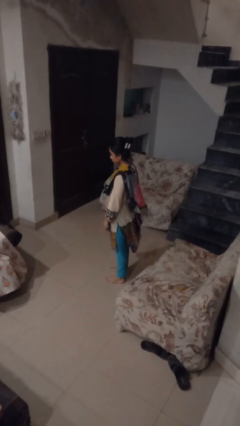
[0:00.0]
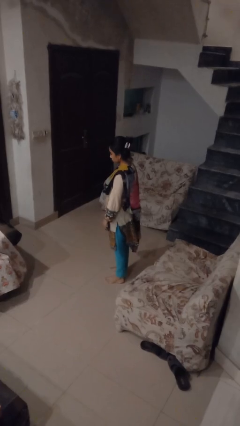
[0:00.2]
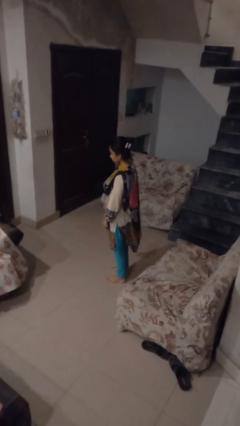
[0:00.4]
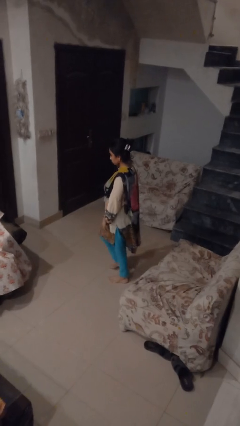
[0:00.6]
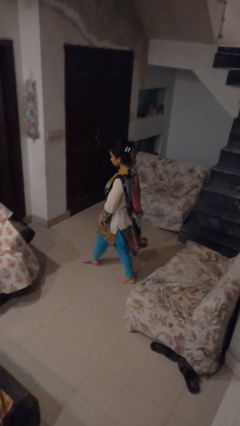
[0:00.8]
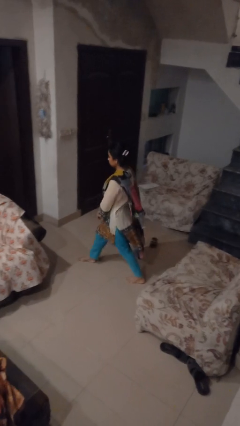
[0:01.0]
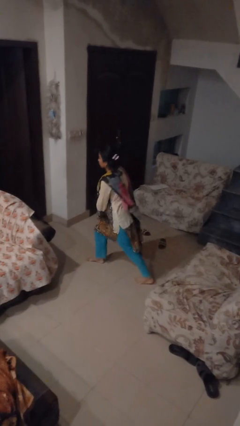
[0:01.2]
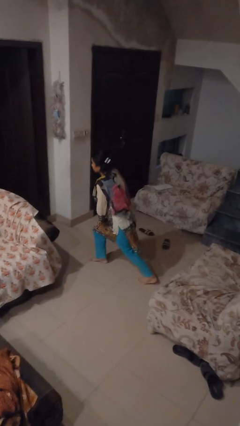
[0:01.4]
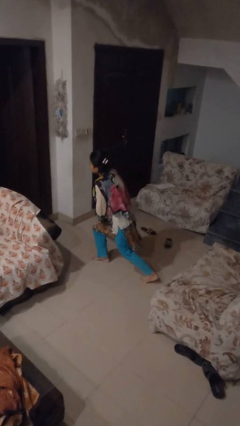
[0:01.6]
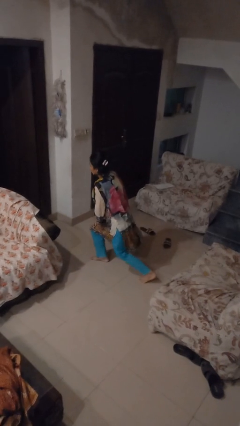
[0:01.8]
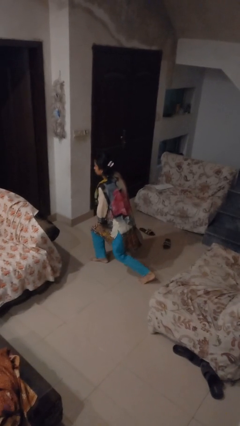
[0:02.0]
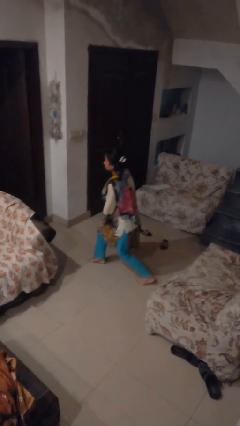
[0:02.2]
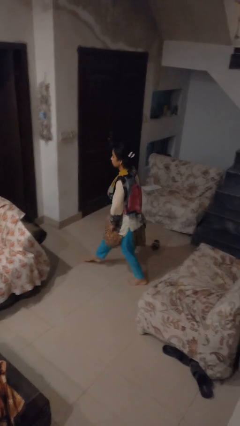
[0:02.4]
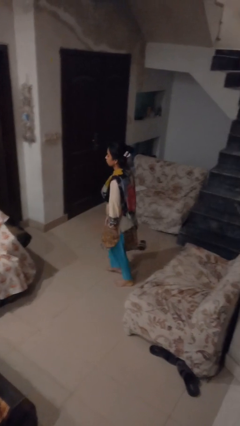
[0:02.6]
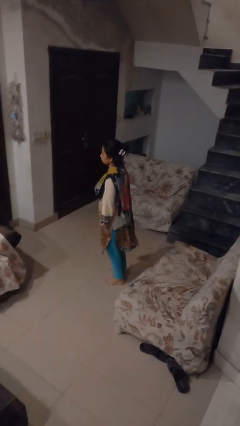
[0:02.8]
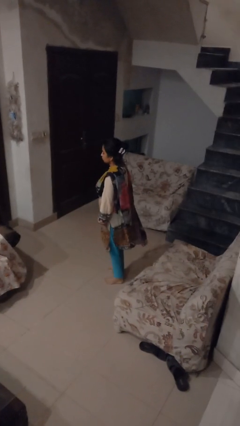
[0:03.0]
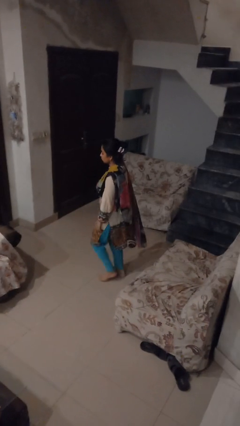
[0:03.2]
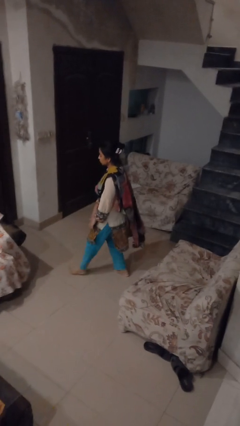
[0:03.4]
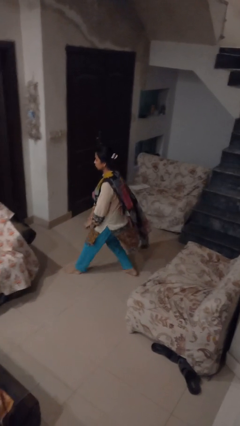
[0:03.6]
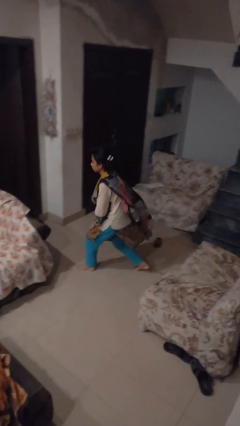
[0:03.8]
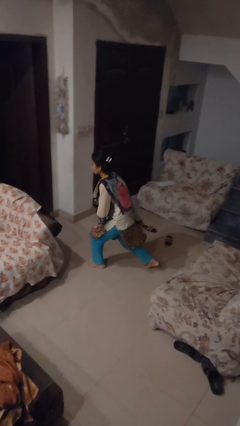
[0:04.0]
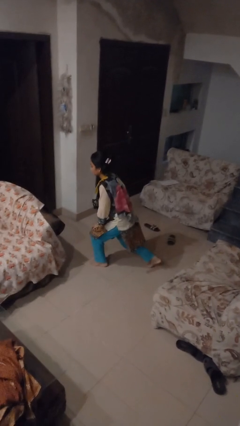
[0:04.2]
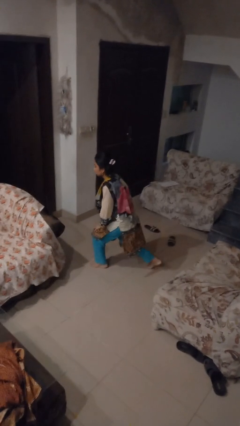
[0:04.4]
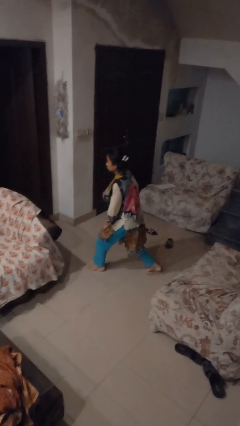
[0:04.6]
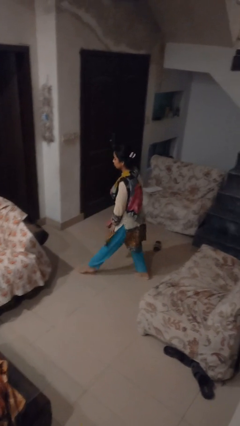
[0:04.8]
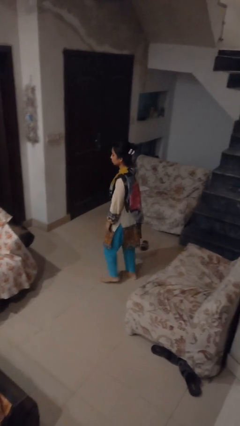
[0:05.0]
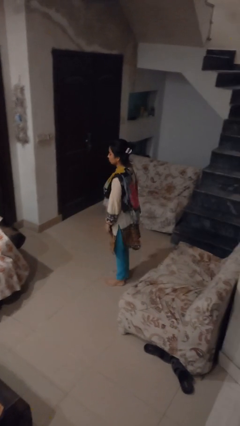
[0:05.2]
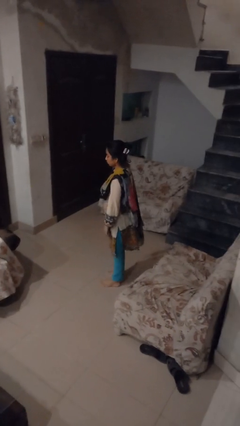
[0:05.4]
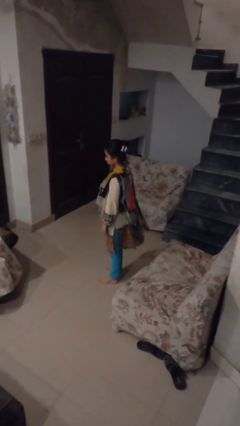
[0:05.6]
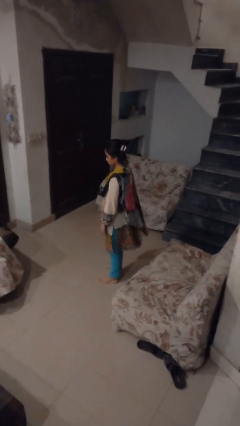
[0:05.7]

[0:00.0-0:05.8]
person exercises with lunges

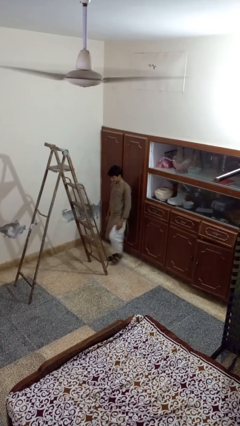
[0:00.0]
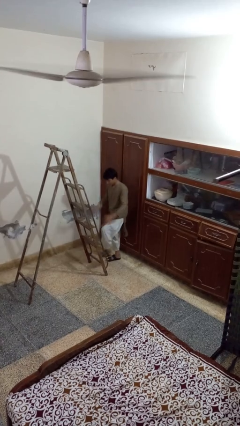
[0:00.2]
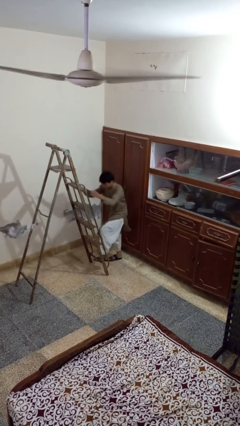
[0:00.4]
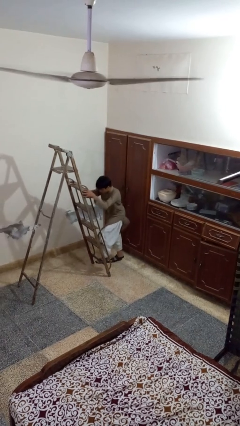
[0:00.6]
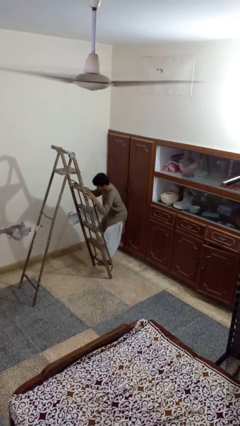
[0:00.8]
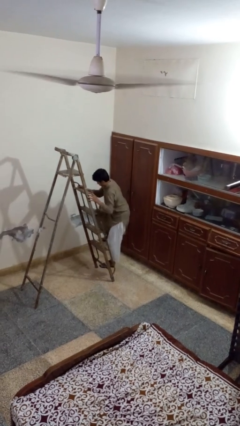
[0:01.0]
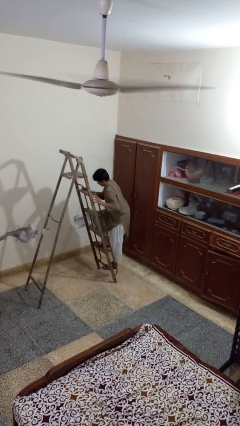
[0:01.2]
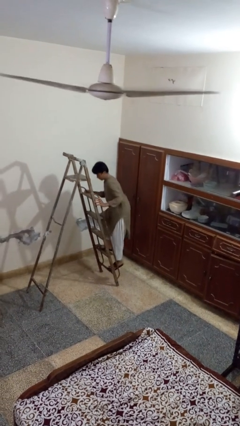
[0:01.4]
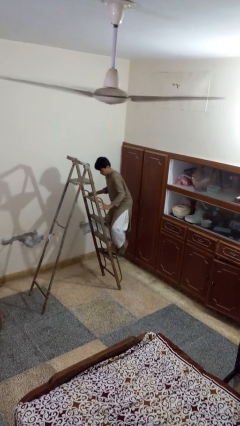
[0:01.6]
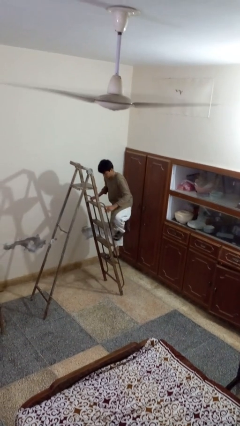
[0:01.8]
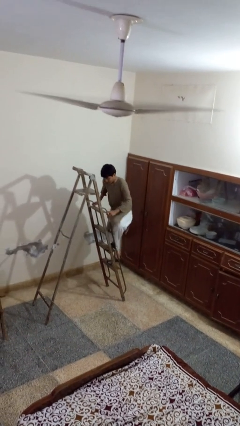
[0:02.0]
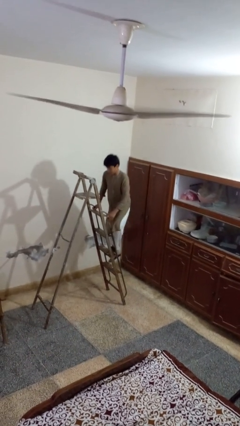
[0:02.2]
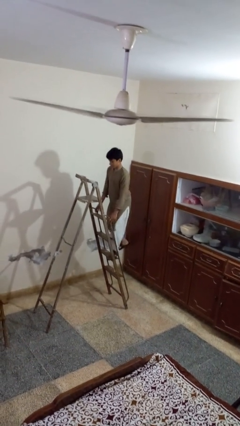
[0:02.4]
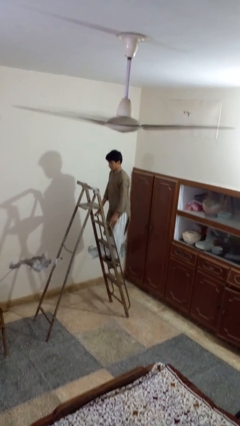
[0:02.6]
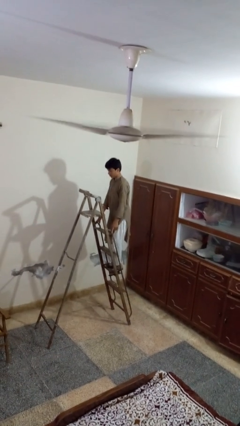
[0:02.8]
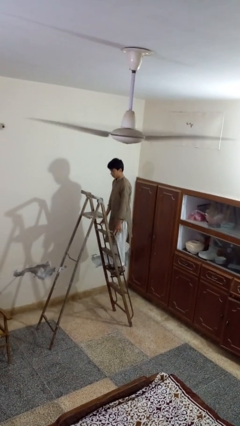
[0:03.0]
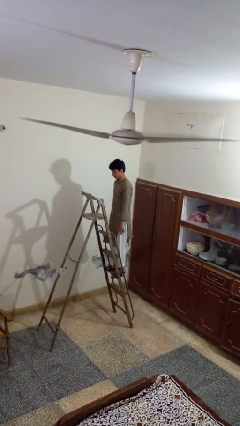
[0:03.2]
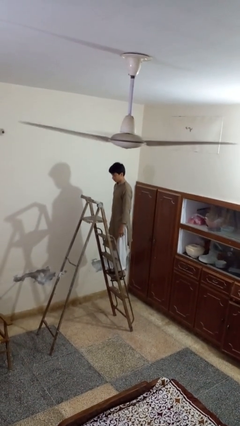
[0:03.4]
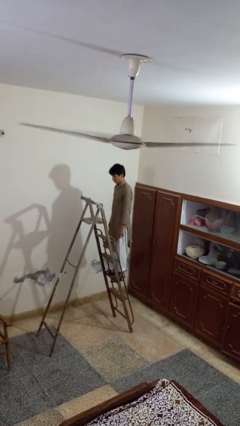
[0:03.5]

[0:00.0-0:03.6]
person climbs up ladder

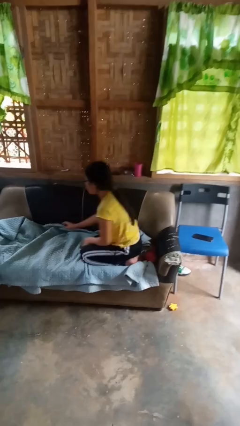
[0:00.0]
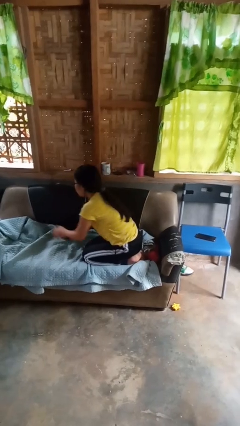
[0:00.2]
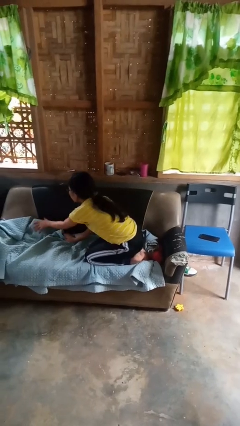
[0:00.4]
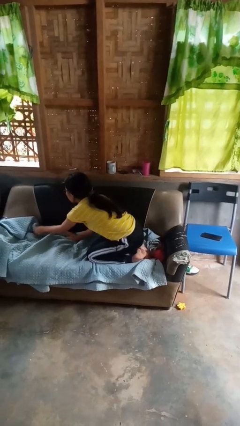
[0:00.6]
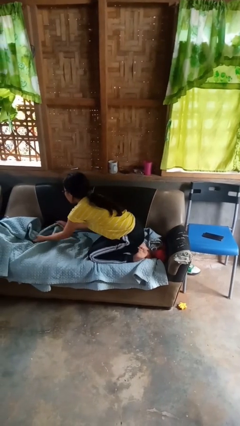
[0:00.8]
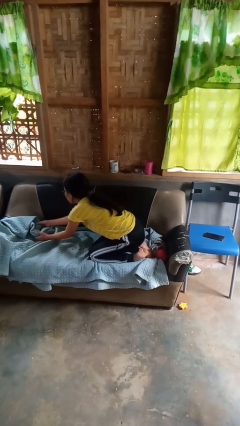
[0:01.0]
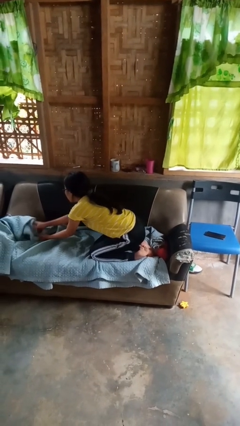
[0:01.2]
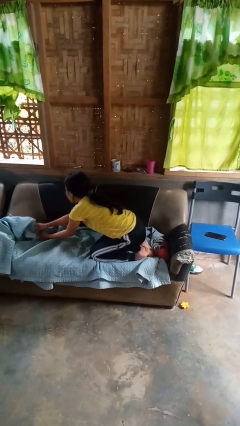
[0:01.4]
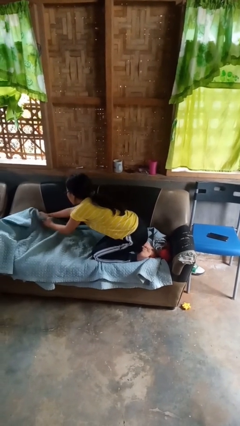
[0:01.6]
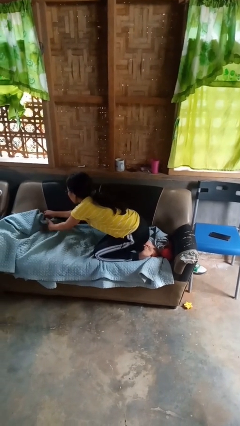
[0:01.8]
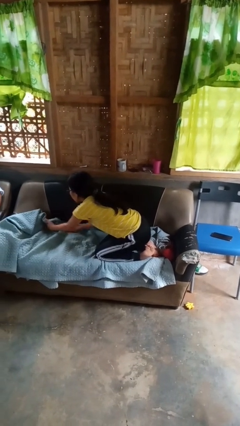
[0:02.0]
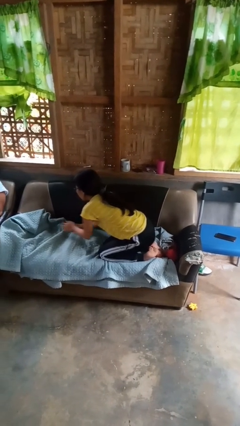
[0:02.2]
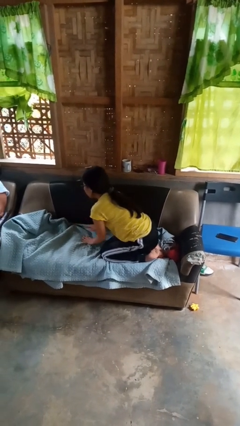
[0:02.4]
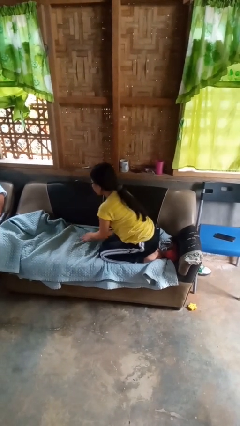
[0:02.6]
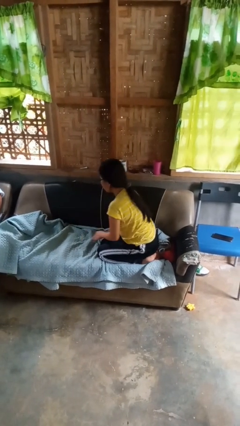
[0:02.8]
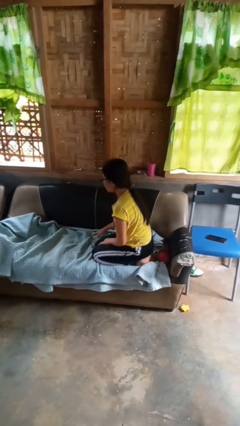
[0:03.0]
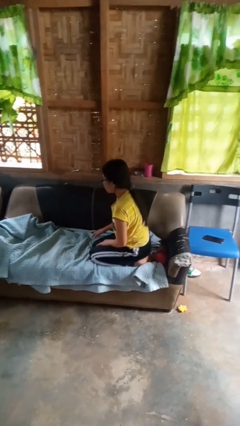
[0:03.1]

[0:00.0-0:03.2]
person searches in couch

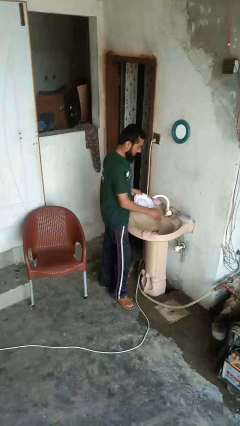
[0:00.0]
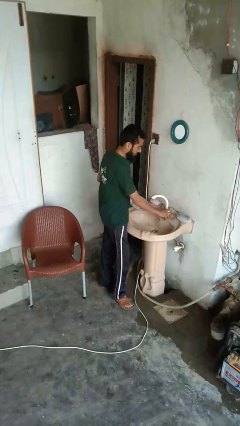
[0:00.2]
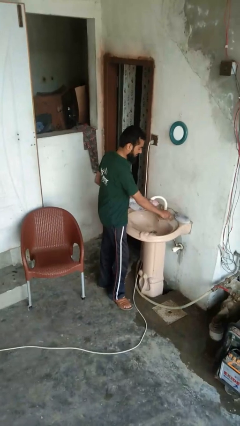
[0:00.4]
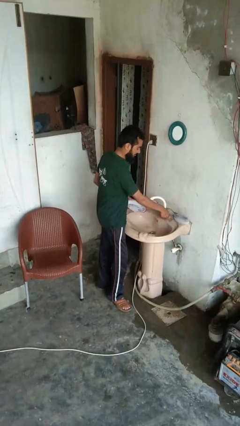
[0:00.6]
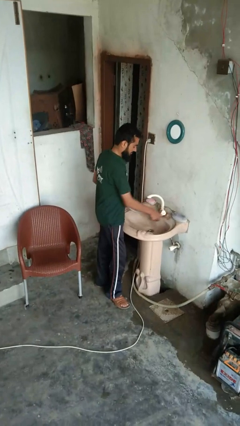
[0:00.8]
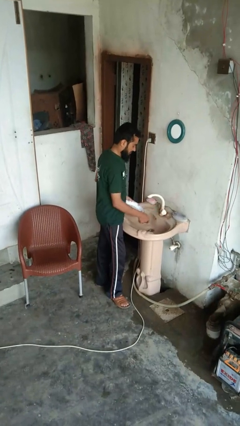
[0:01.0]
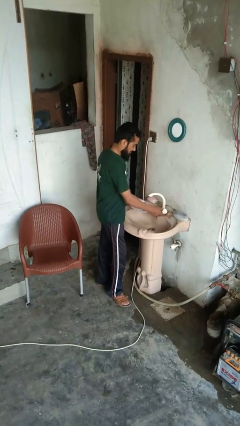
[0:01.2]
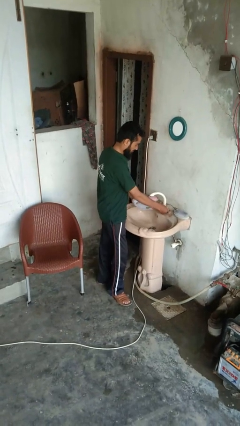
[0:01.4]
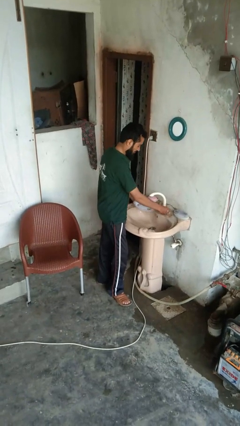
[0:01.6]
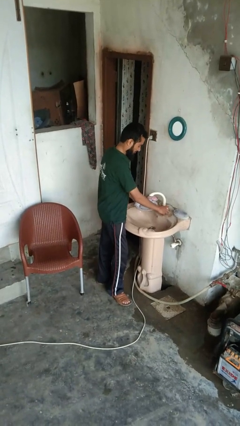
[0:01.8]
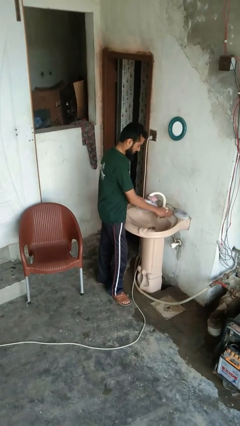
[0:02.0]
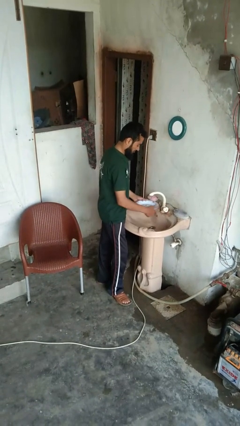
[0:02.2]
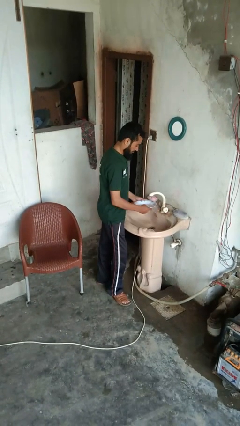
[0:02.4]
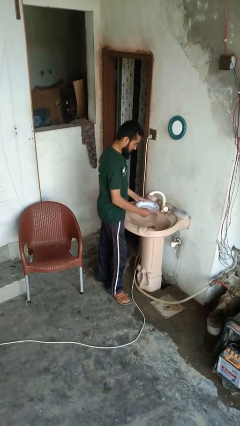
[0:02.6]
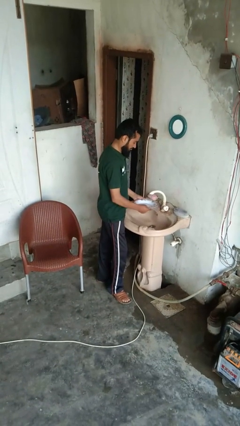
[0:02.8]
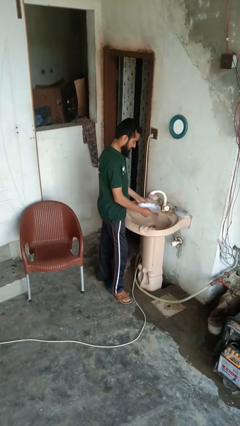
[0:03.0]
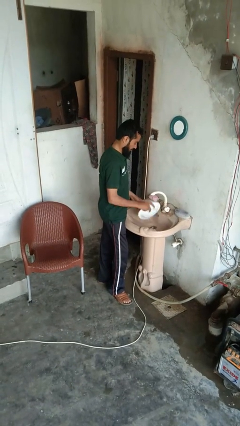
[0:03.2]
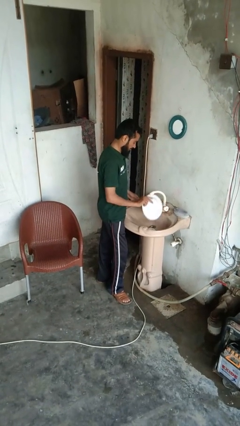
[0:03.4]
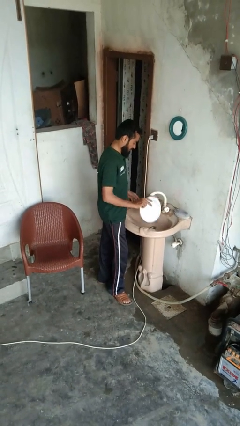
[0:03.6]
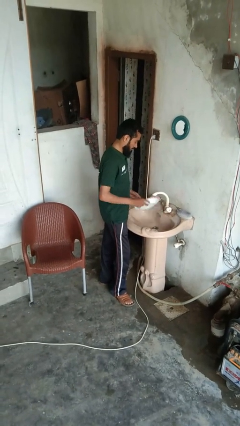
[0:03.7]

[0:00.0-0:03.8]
person washes dish

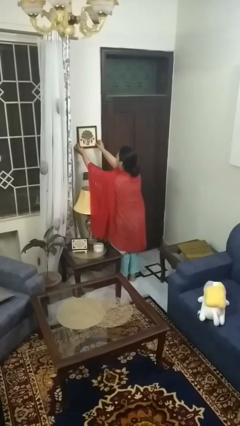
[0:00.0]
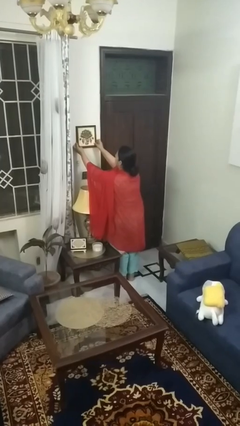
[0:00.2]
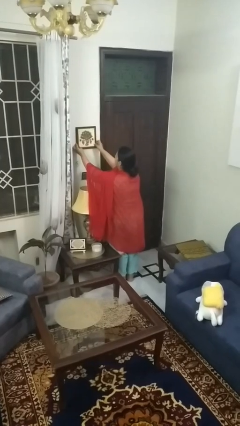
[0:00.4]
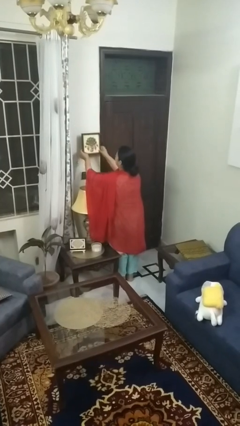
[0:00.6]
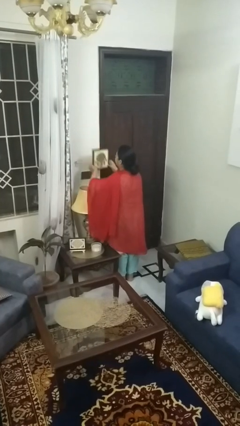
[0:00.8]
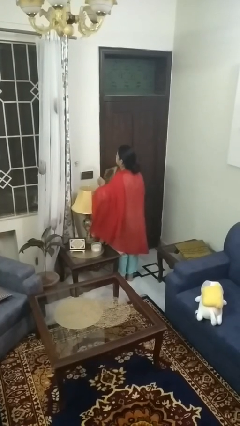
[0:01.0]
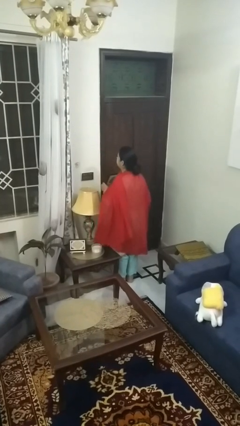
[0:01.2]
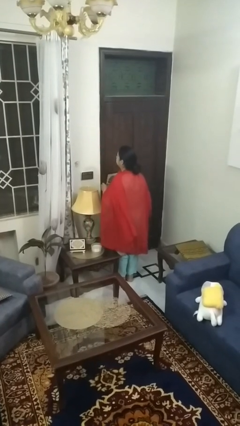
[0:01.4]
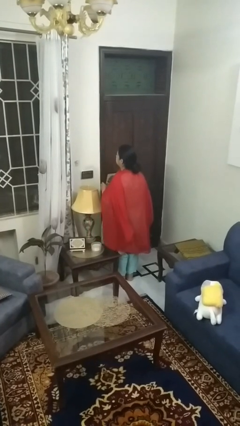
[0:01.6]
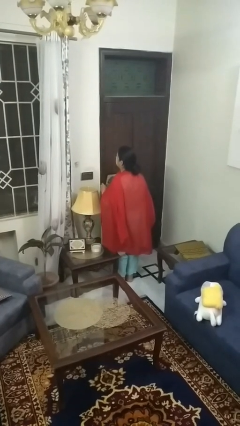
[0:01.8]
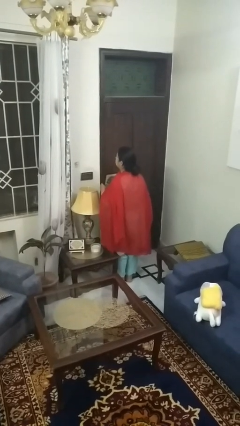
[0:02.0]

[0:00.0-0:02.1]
person takes down picture frame
